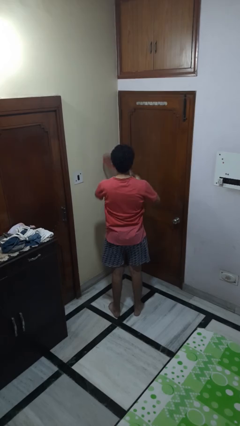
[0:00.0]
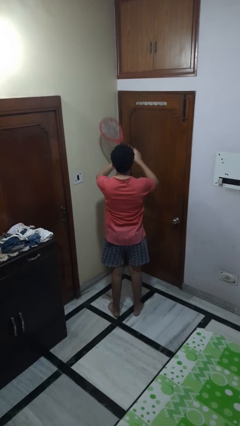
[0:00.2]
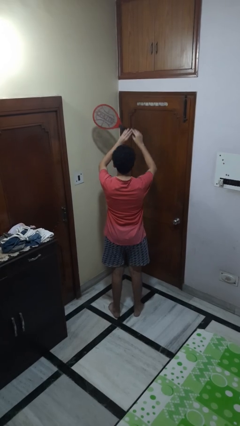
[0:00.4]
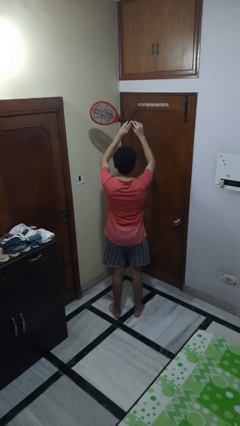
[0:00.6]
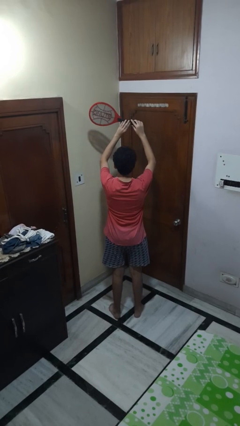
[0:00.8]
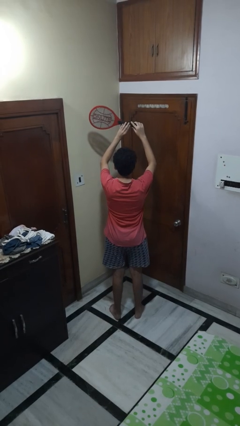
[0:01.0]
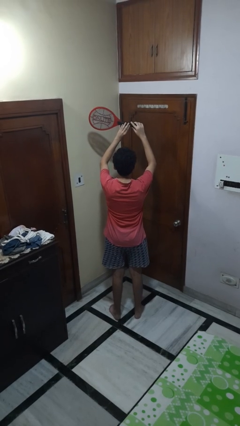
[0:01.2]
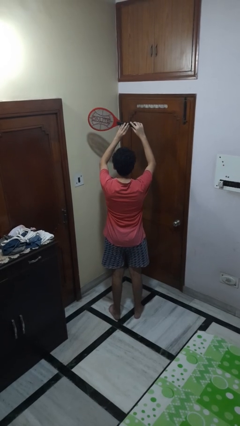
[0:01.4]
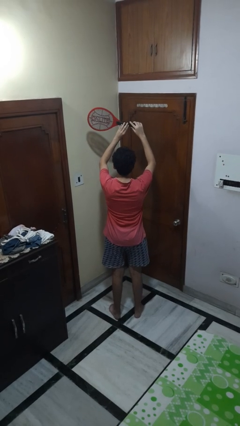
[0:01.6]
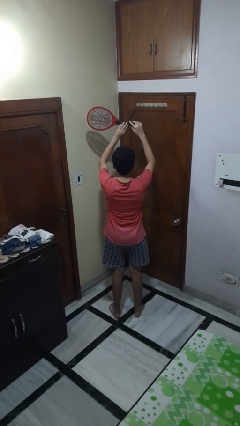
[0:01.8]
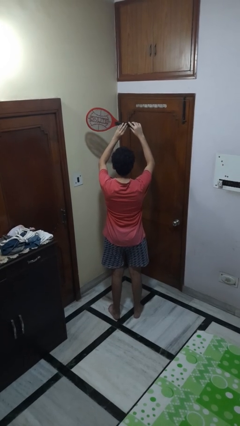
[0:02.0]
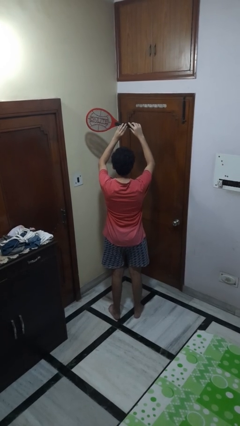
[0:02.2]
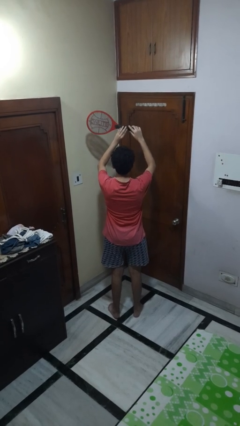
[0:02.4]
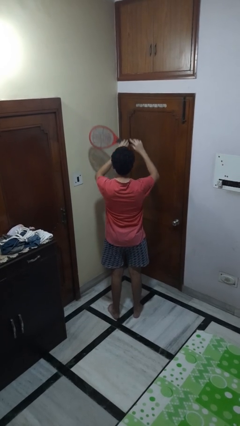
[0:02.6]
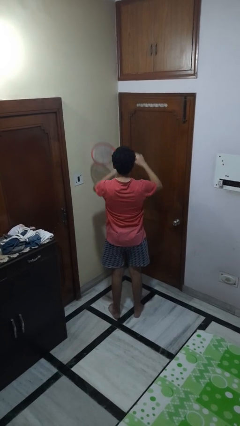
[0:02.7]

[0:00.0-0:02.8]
person holds object above head

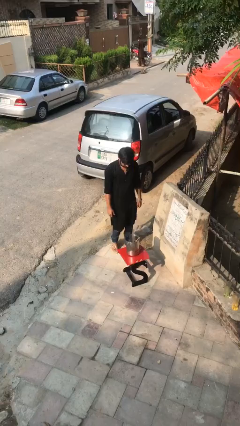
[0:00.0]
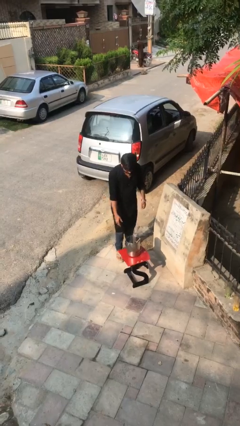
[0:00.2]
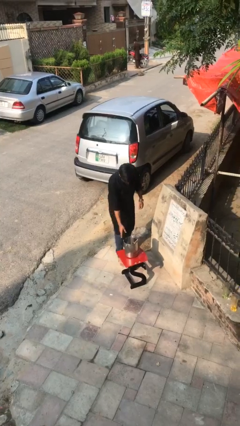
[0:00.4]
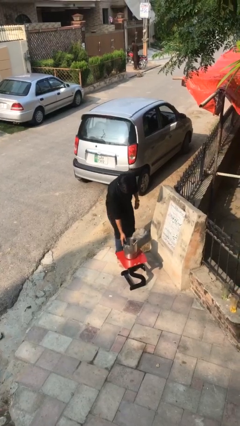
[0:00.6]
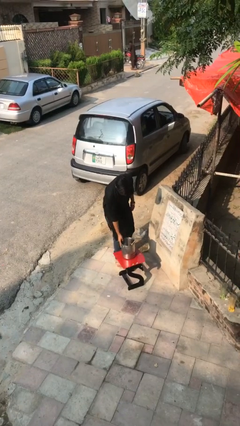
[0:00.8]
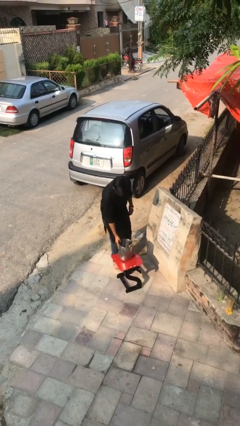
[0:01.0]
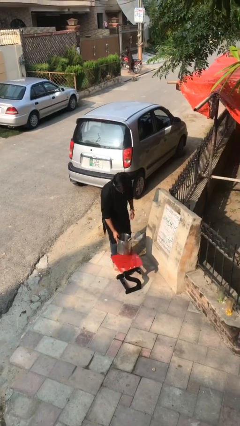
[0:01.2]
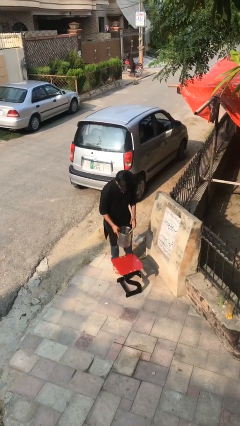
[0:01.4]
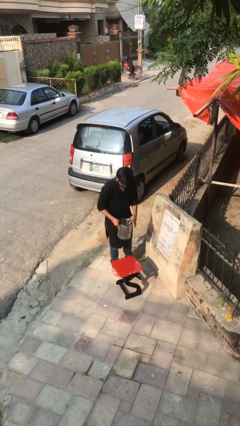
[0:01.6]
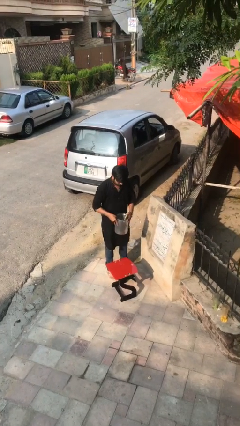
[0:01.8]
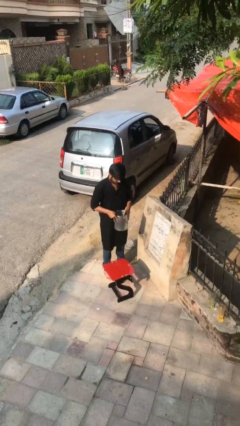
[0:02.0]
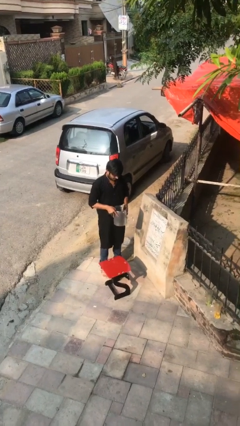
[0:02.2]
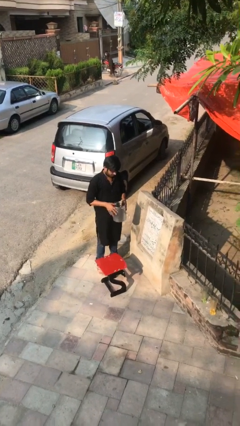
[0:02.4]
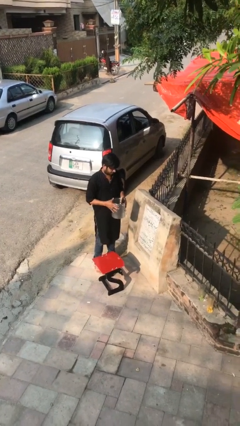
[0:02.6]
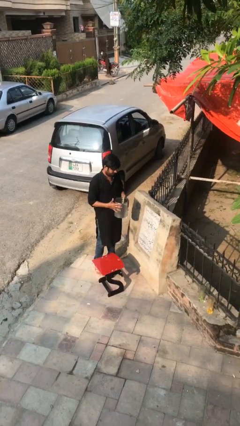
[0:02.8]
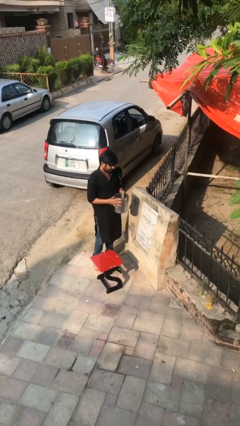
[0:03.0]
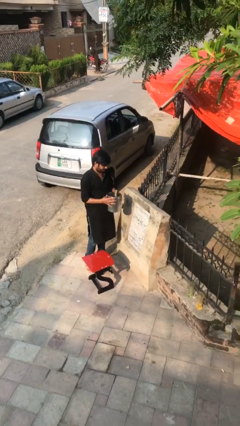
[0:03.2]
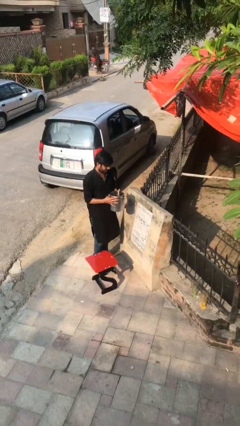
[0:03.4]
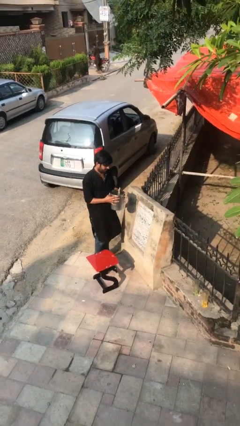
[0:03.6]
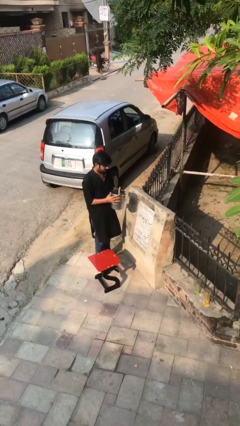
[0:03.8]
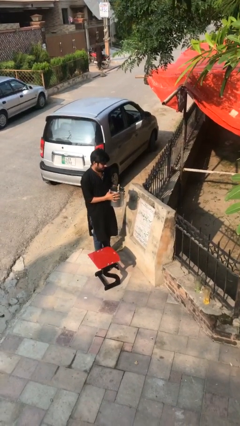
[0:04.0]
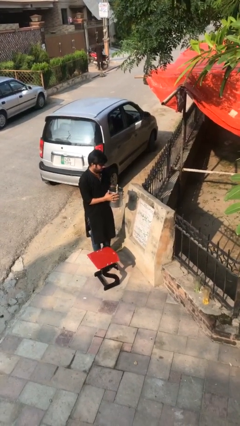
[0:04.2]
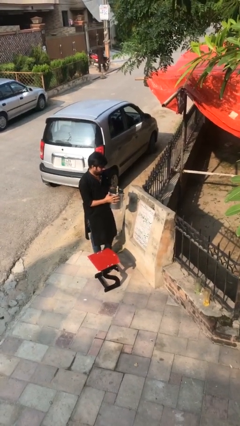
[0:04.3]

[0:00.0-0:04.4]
person picks up object from table

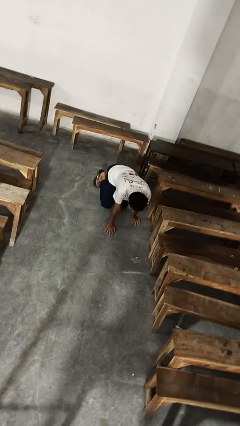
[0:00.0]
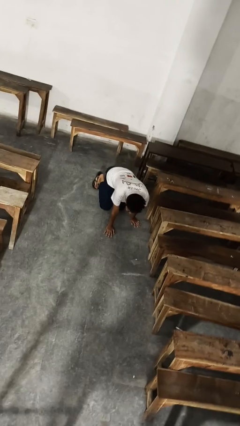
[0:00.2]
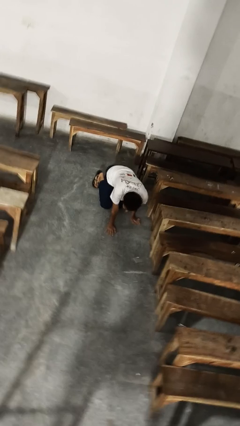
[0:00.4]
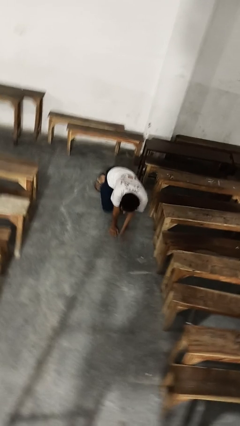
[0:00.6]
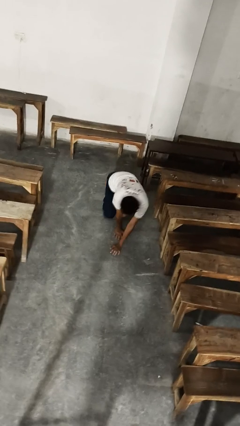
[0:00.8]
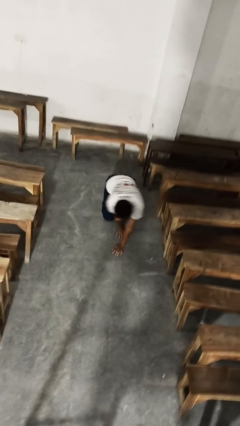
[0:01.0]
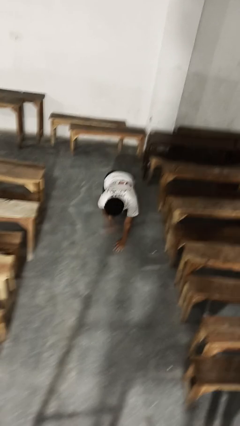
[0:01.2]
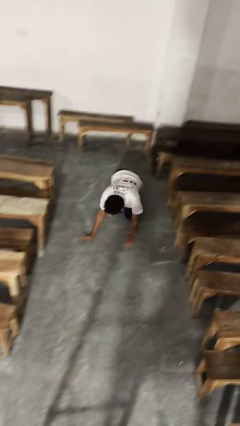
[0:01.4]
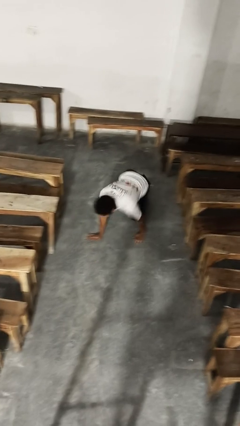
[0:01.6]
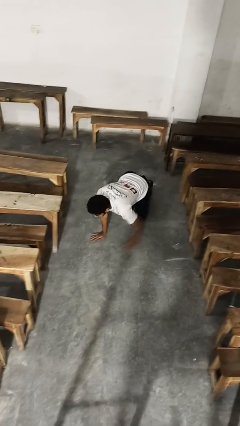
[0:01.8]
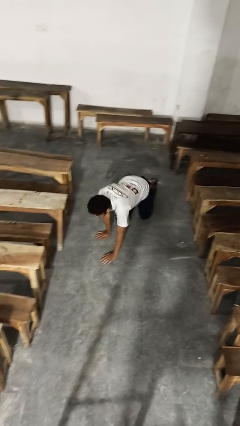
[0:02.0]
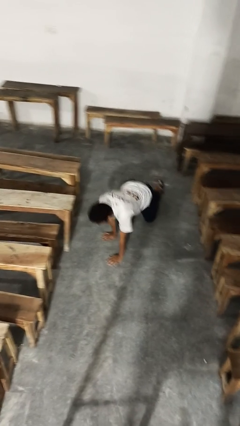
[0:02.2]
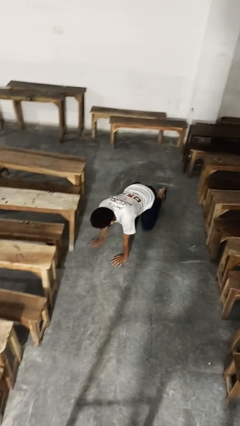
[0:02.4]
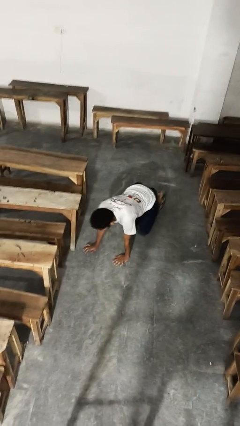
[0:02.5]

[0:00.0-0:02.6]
person crawls

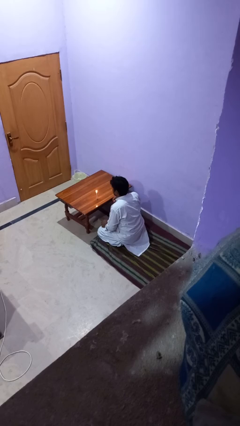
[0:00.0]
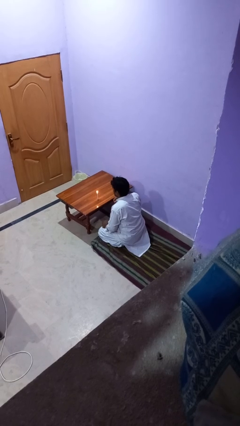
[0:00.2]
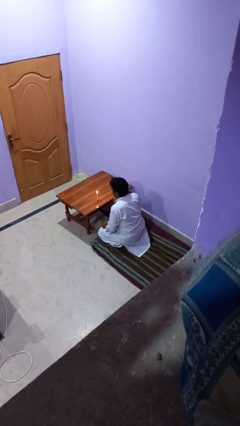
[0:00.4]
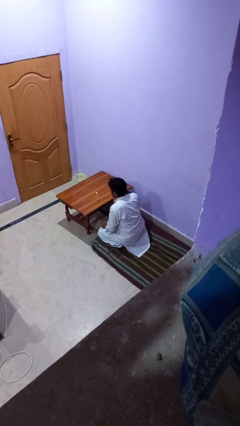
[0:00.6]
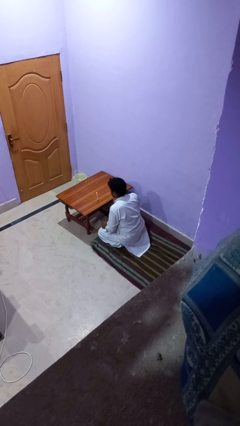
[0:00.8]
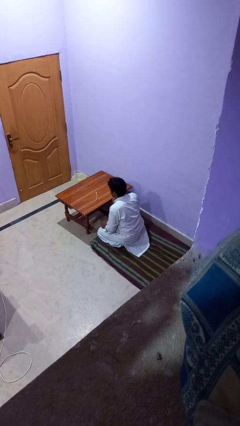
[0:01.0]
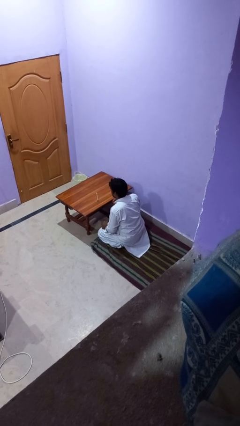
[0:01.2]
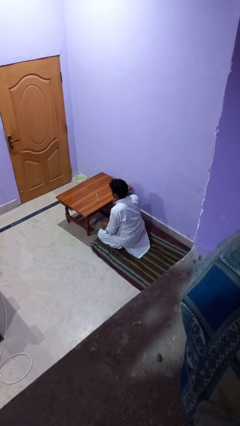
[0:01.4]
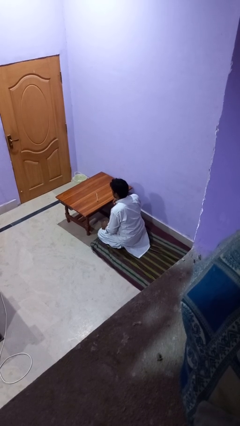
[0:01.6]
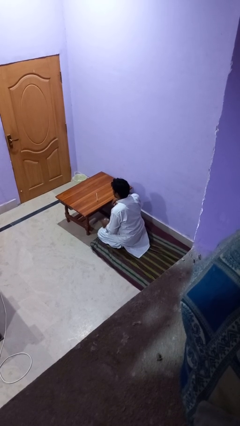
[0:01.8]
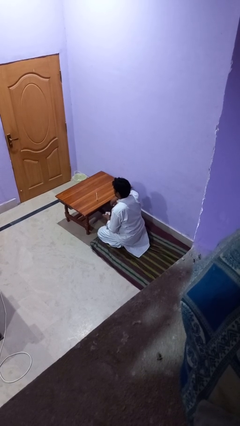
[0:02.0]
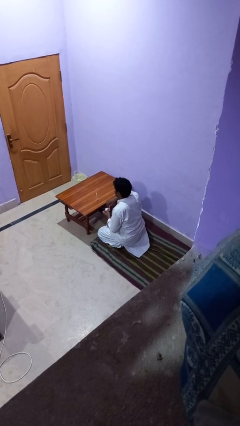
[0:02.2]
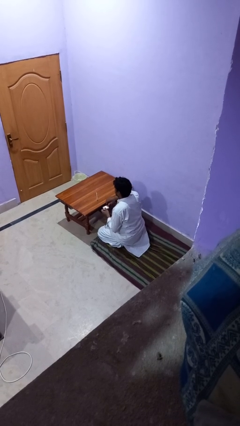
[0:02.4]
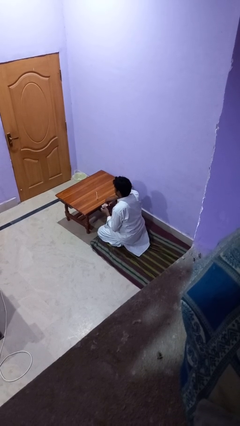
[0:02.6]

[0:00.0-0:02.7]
person extinguishes candle

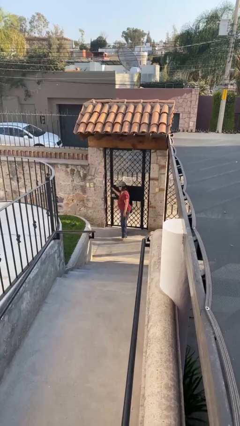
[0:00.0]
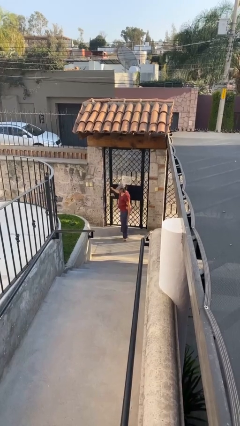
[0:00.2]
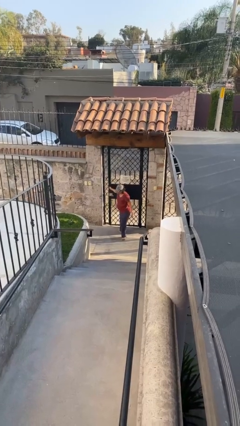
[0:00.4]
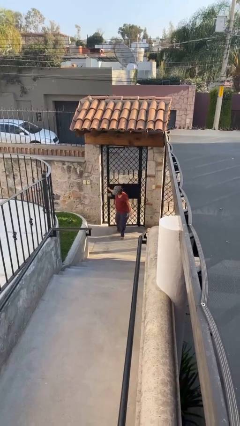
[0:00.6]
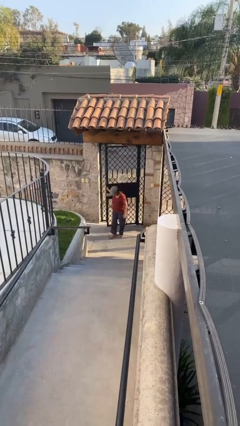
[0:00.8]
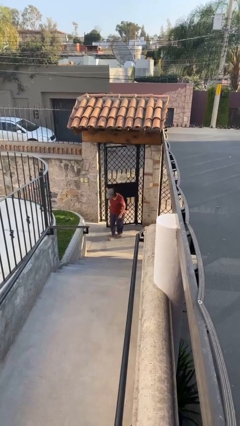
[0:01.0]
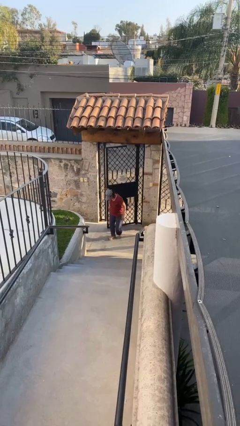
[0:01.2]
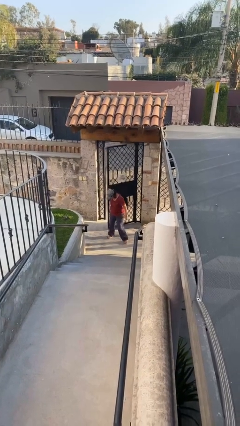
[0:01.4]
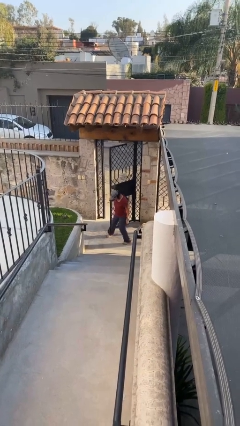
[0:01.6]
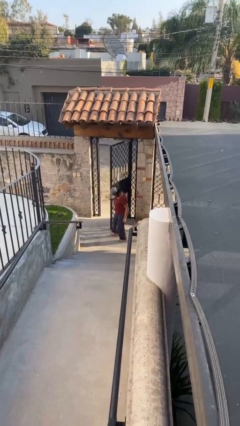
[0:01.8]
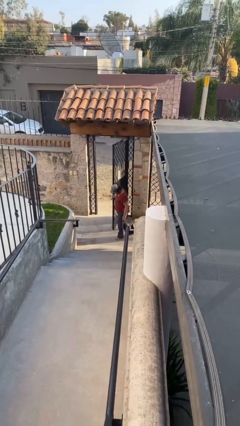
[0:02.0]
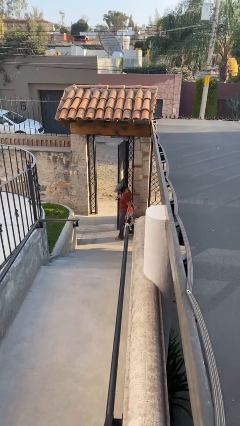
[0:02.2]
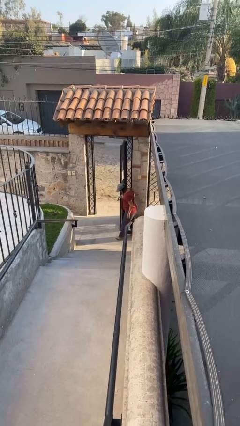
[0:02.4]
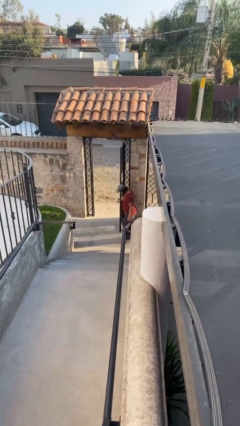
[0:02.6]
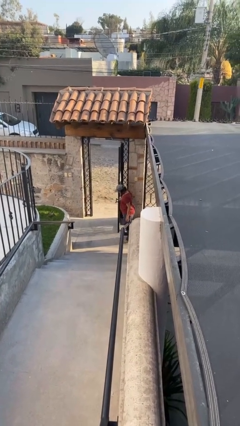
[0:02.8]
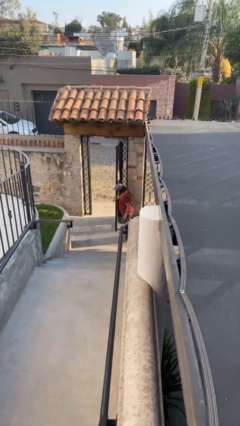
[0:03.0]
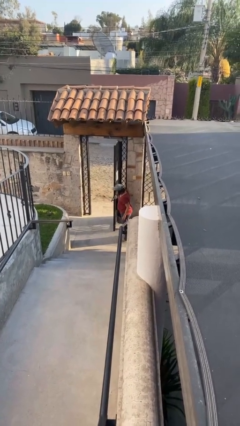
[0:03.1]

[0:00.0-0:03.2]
person opens facility door

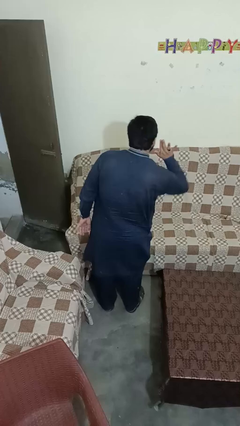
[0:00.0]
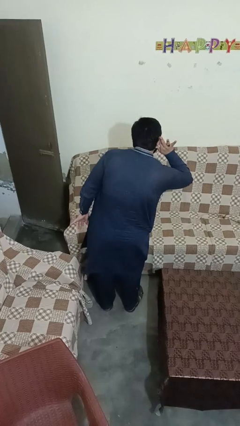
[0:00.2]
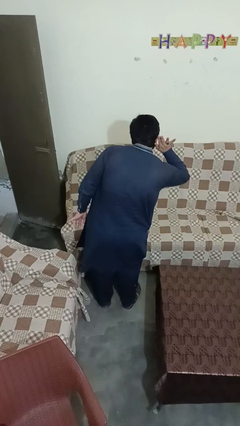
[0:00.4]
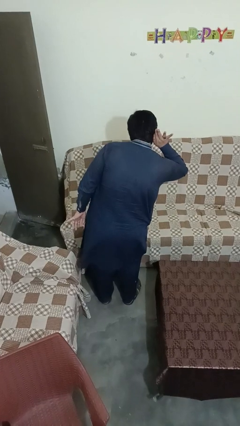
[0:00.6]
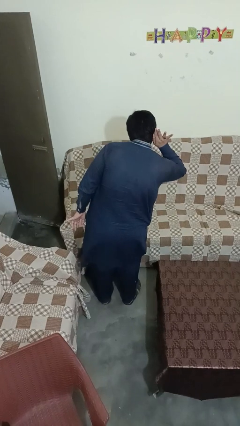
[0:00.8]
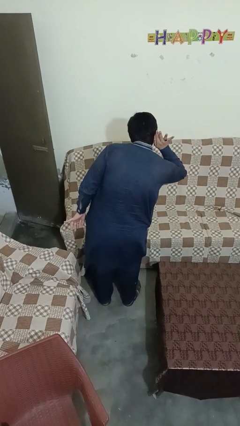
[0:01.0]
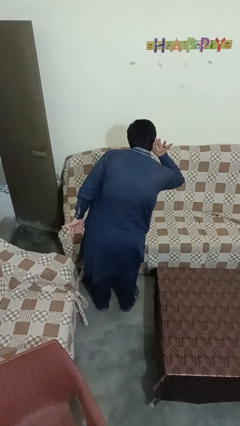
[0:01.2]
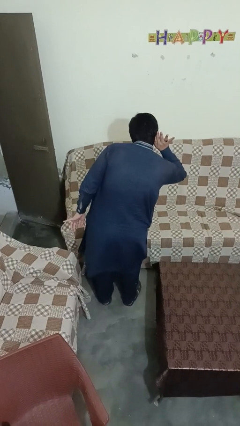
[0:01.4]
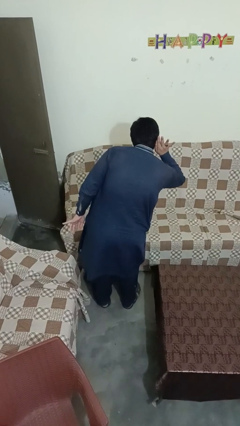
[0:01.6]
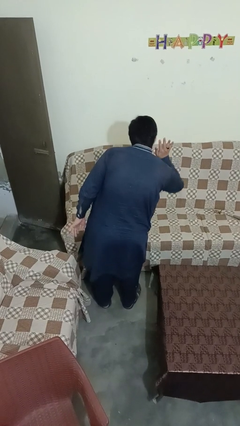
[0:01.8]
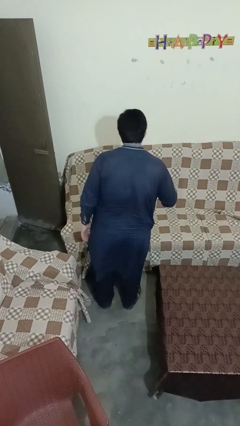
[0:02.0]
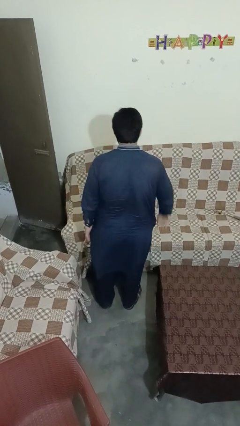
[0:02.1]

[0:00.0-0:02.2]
person gestures listen closely
